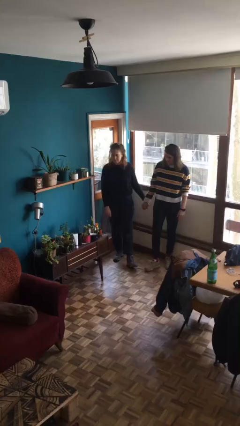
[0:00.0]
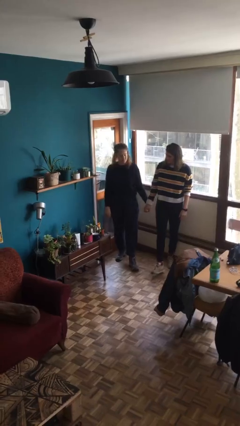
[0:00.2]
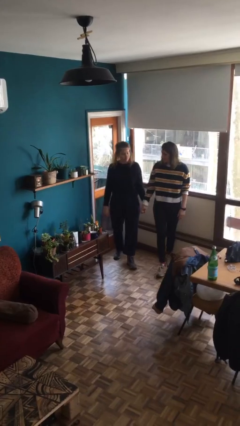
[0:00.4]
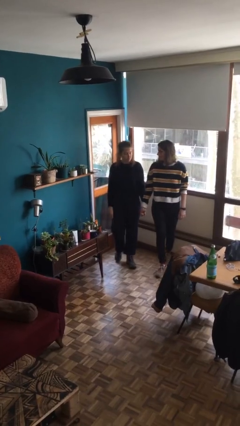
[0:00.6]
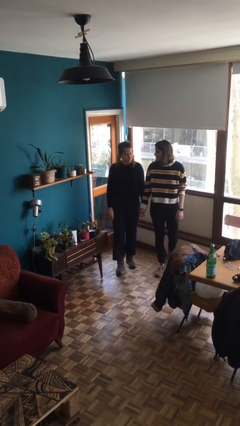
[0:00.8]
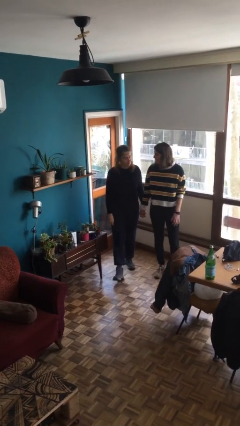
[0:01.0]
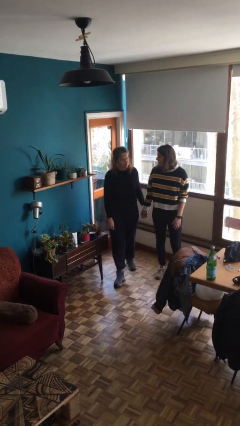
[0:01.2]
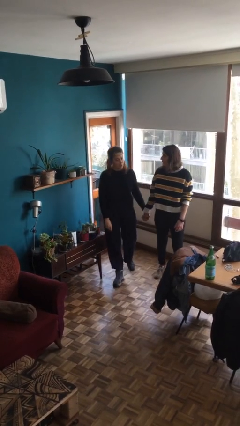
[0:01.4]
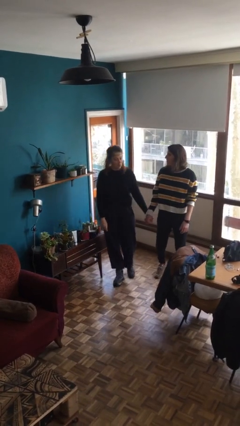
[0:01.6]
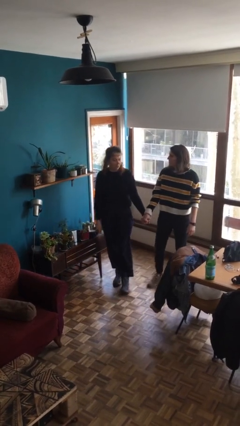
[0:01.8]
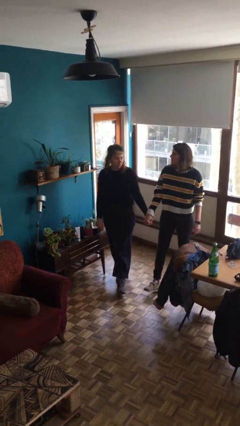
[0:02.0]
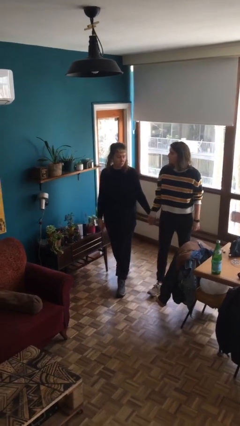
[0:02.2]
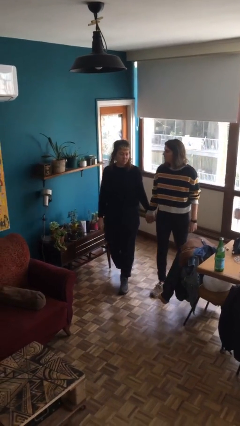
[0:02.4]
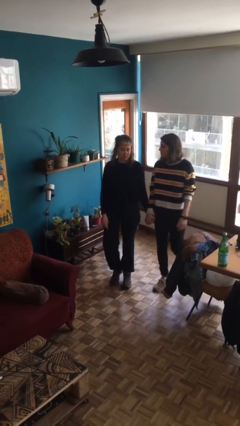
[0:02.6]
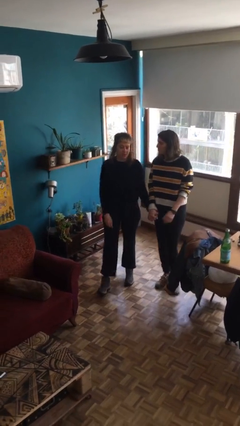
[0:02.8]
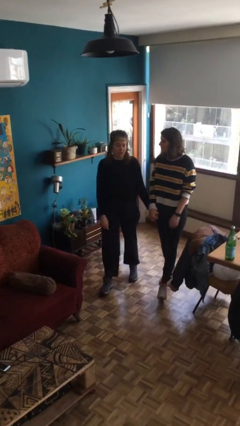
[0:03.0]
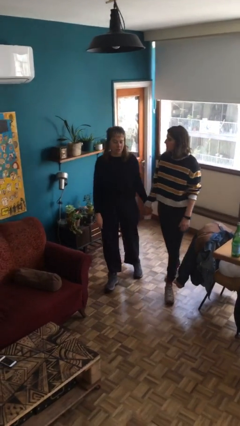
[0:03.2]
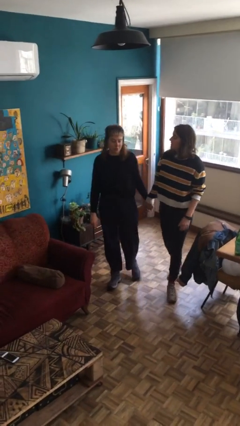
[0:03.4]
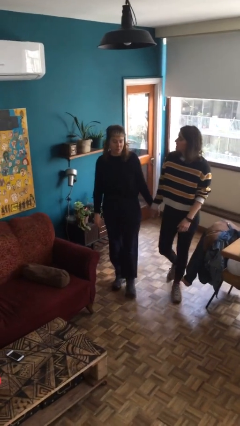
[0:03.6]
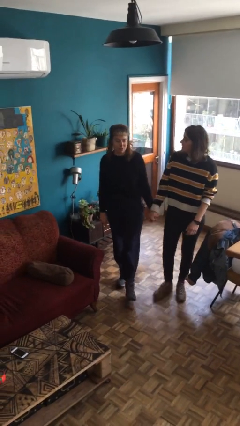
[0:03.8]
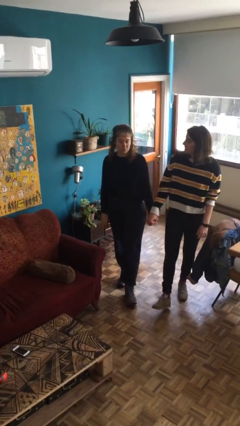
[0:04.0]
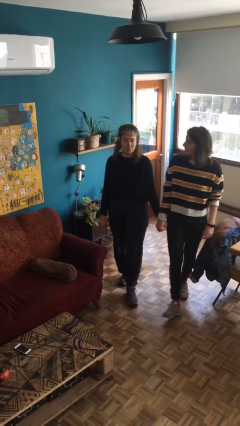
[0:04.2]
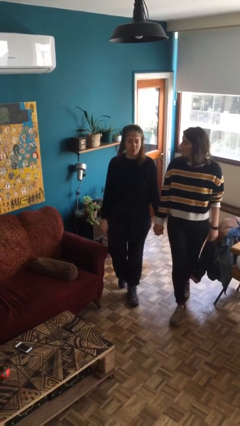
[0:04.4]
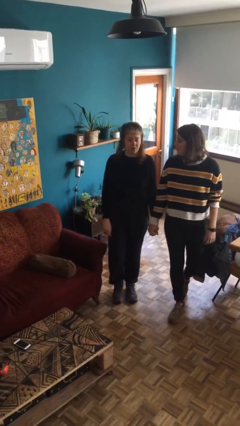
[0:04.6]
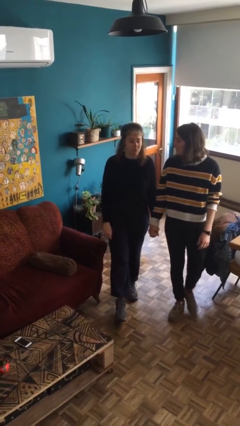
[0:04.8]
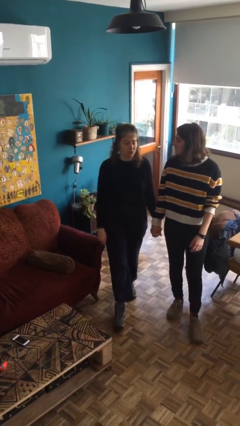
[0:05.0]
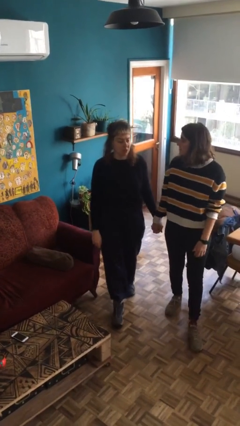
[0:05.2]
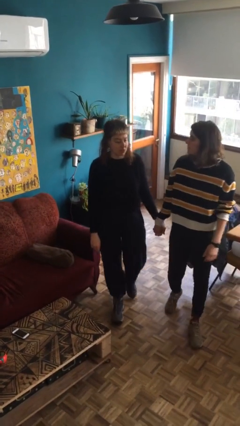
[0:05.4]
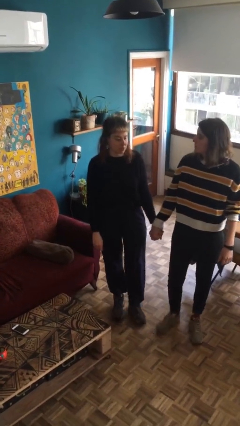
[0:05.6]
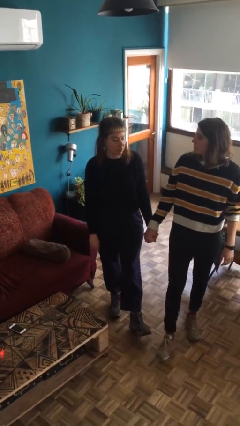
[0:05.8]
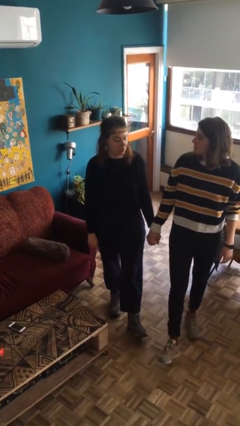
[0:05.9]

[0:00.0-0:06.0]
person holds hand

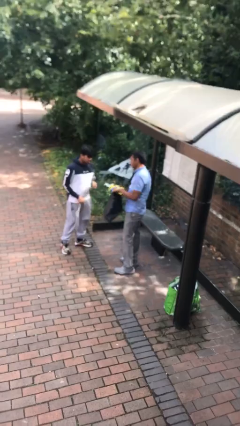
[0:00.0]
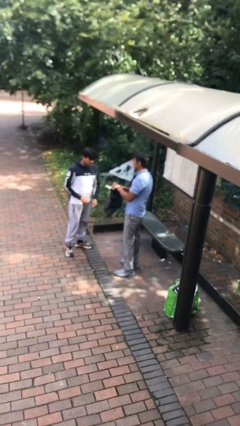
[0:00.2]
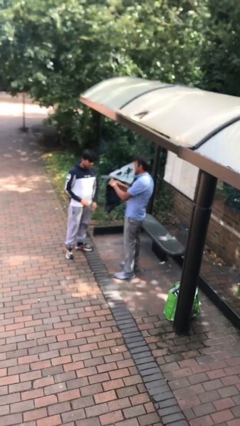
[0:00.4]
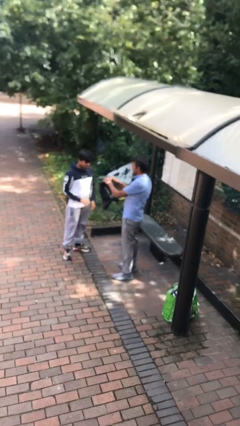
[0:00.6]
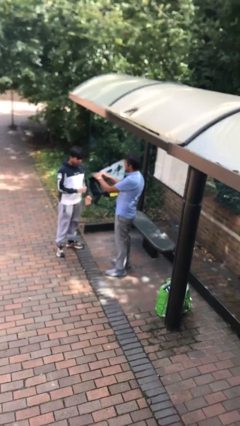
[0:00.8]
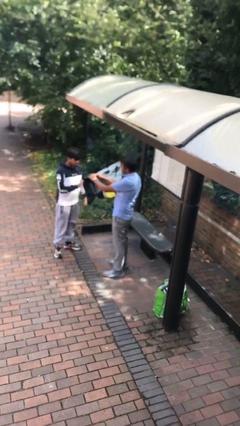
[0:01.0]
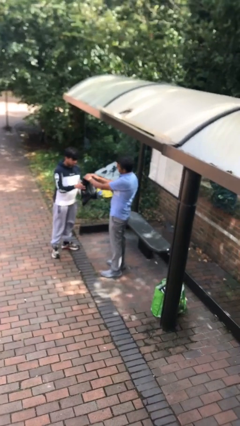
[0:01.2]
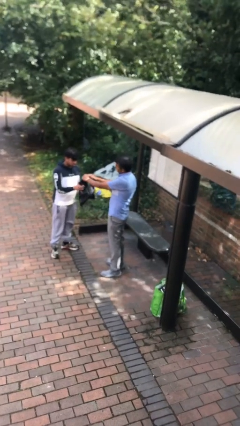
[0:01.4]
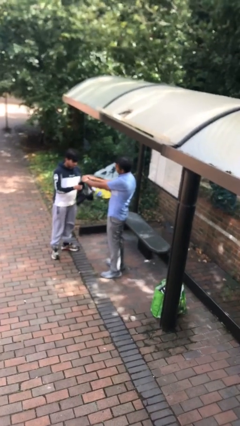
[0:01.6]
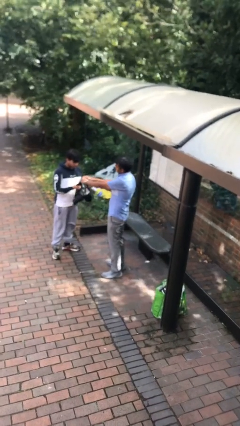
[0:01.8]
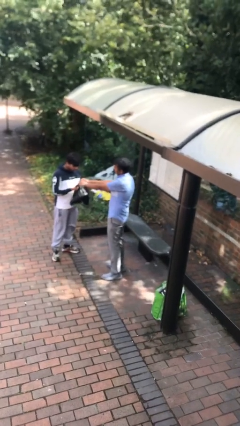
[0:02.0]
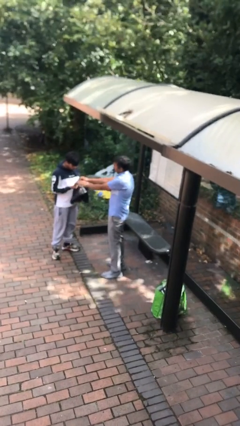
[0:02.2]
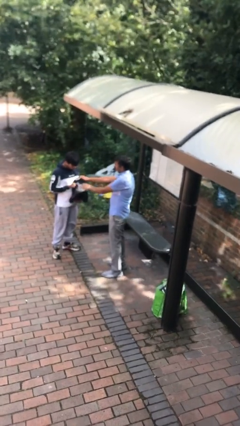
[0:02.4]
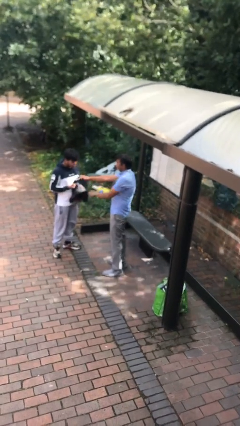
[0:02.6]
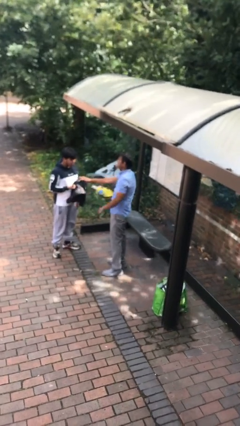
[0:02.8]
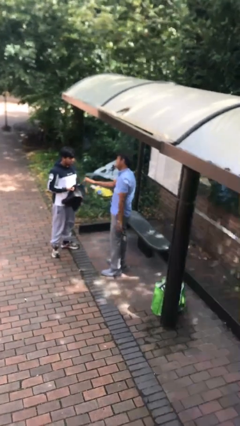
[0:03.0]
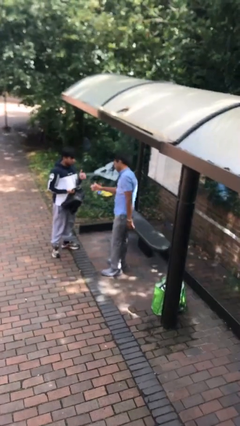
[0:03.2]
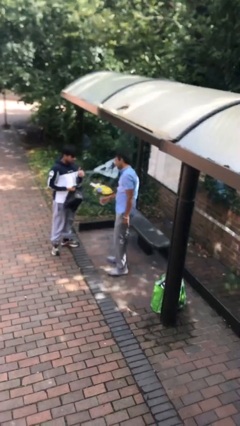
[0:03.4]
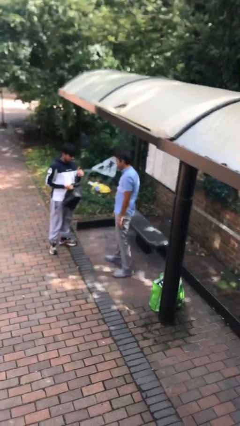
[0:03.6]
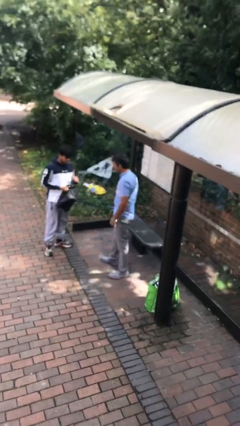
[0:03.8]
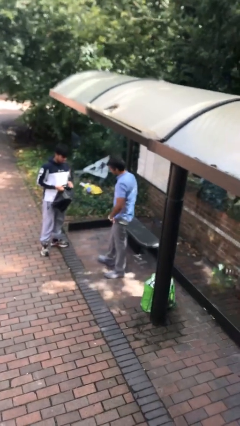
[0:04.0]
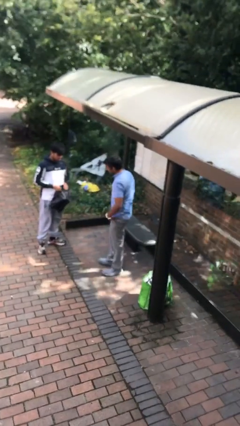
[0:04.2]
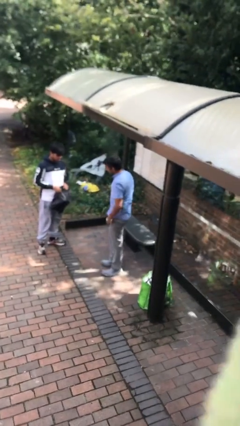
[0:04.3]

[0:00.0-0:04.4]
person transfers object to person

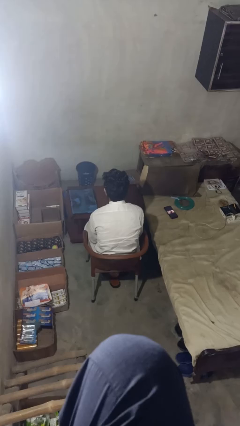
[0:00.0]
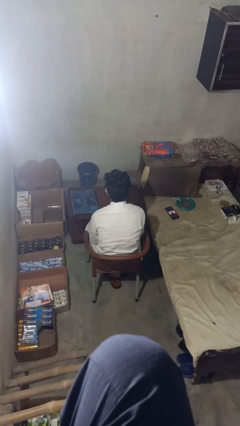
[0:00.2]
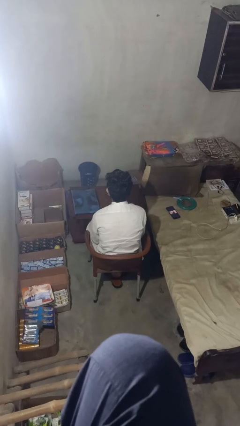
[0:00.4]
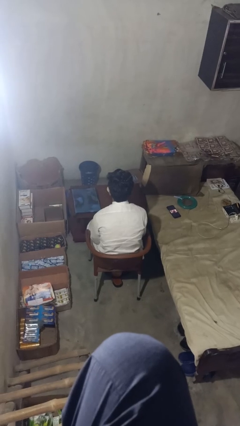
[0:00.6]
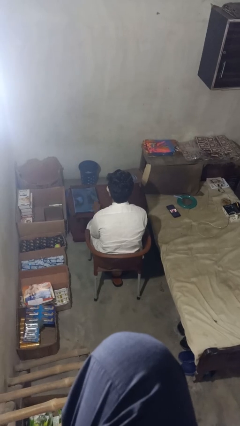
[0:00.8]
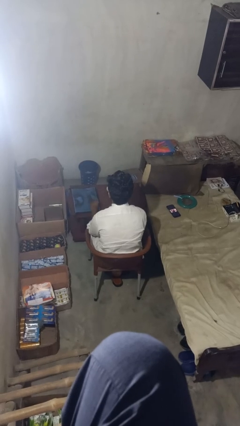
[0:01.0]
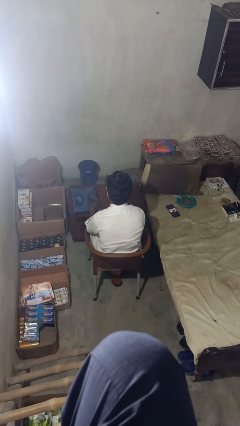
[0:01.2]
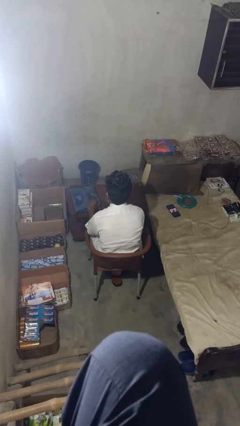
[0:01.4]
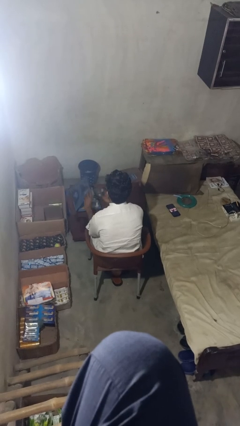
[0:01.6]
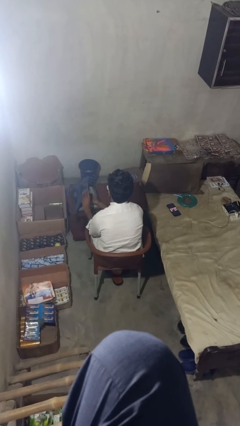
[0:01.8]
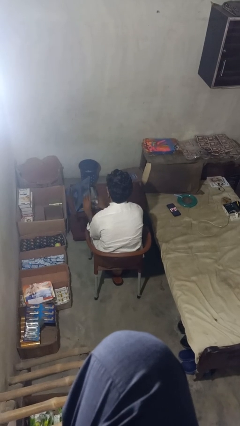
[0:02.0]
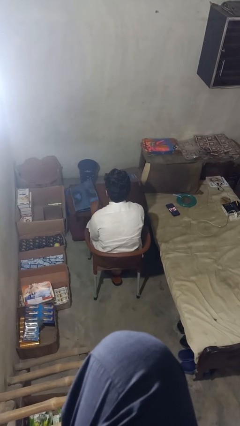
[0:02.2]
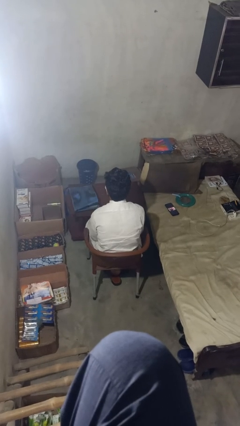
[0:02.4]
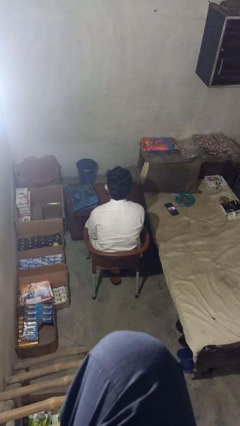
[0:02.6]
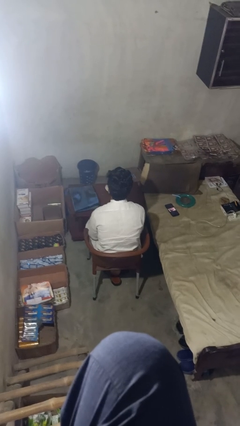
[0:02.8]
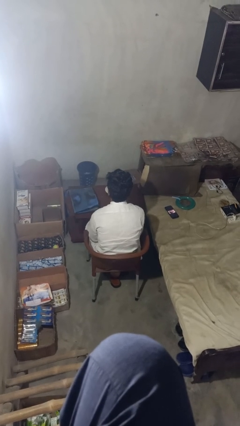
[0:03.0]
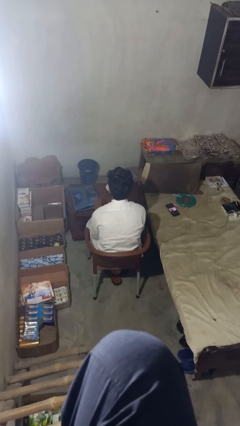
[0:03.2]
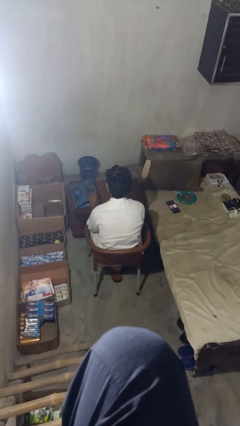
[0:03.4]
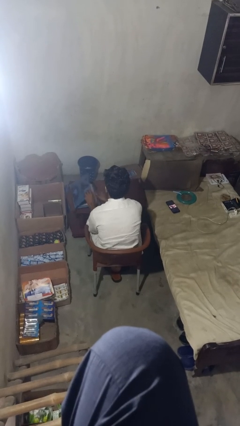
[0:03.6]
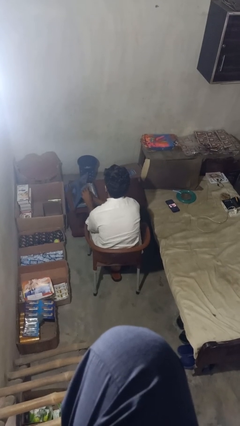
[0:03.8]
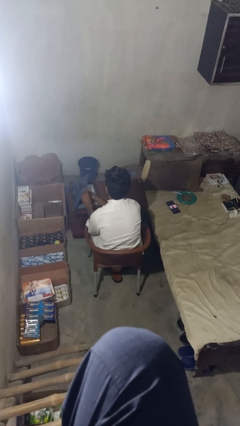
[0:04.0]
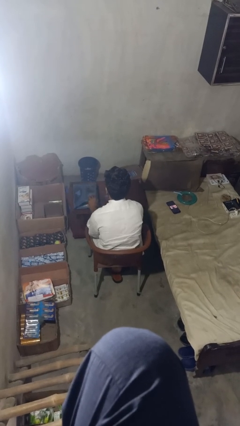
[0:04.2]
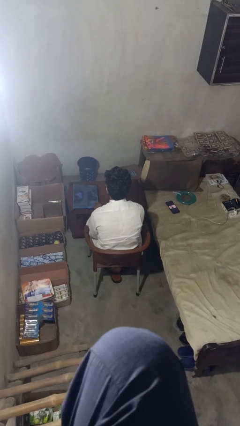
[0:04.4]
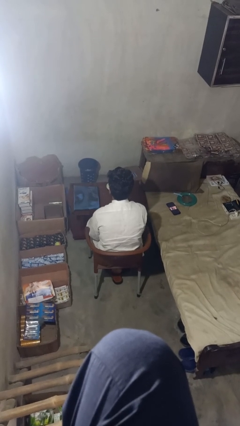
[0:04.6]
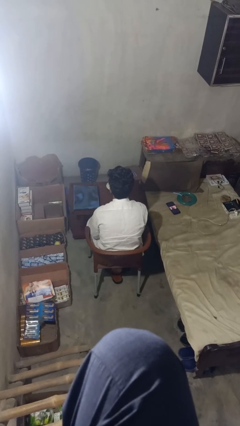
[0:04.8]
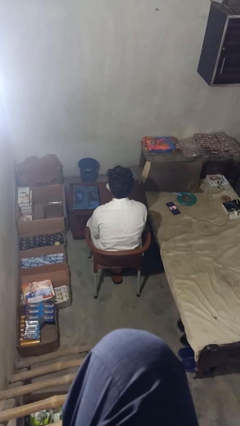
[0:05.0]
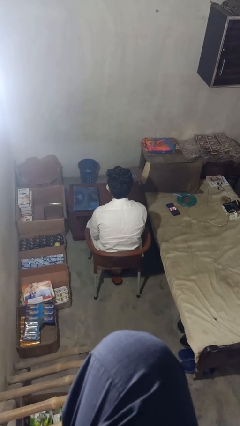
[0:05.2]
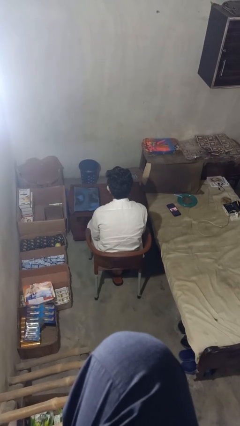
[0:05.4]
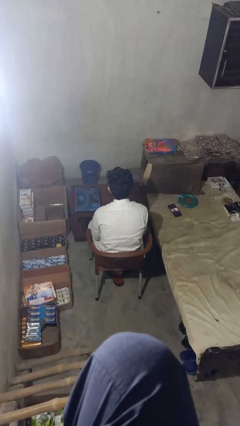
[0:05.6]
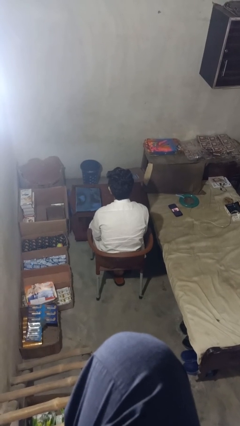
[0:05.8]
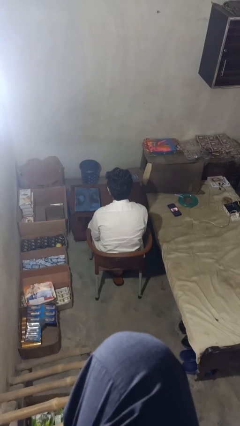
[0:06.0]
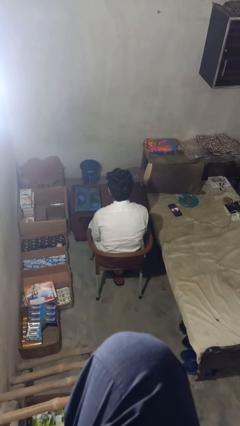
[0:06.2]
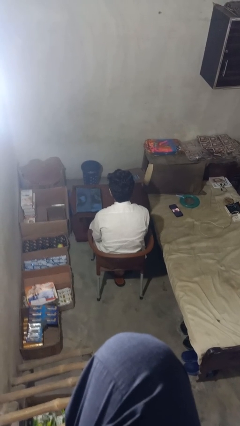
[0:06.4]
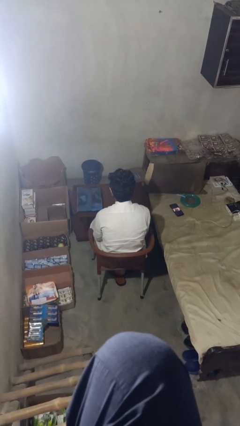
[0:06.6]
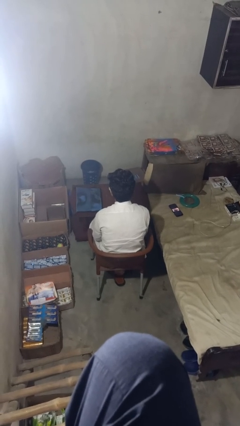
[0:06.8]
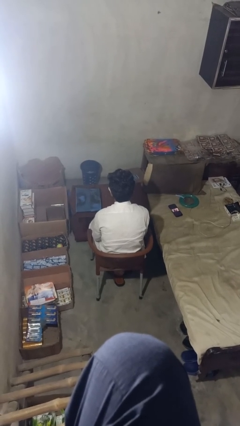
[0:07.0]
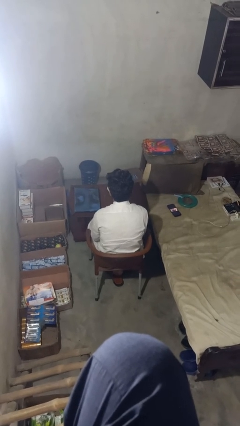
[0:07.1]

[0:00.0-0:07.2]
person takes object from bag

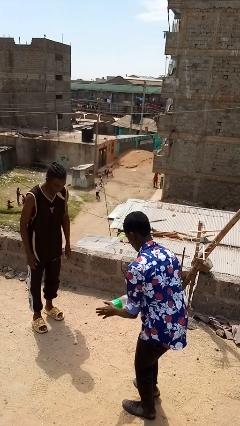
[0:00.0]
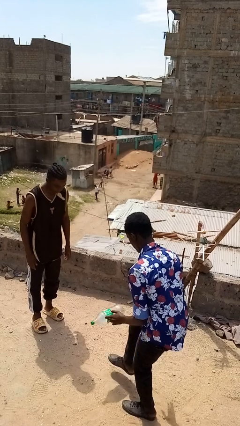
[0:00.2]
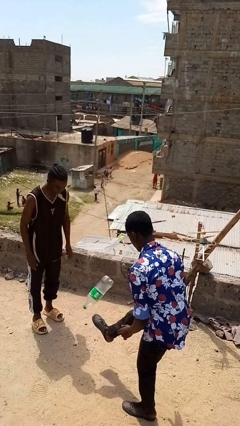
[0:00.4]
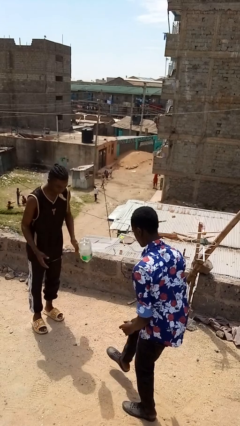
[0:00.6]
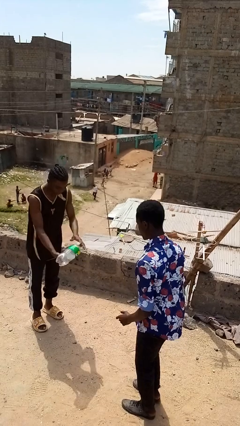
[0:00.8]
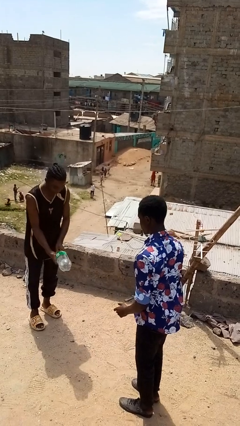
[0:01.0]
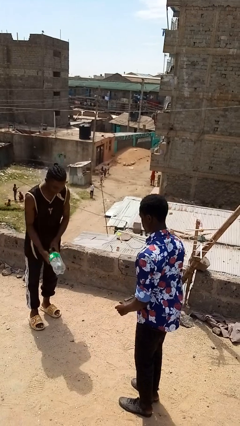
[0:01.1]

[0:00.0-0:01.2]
person kicks object to person
